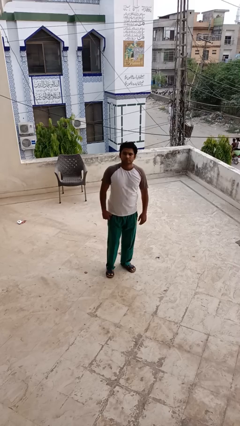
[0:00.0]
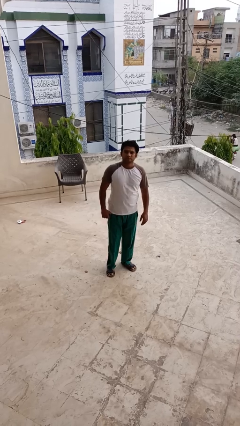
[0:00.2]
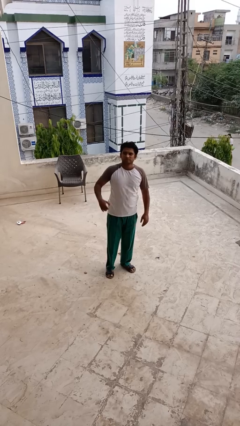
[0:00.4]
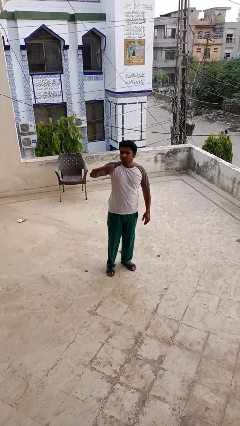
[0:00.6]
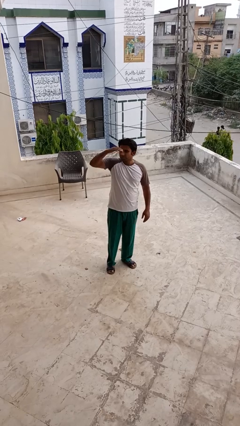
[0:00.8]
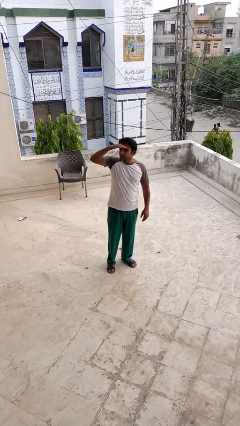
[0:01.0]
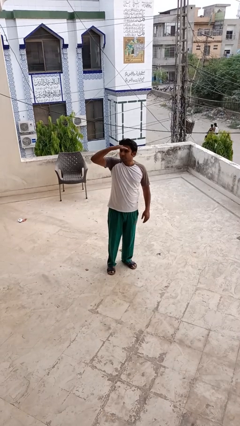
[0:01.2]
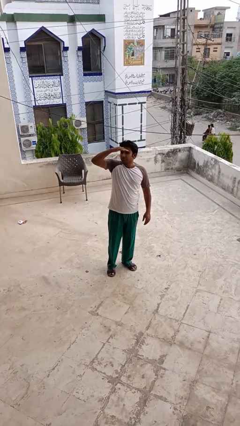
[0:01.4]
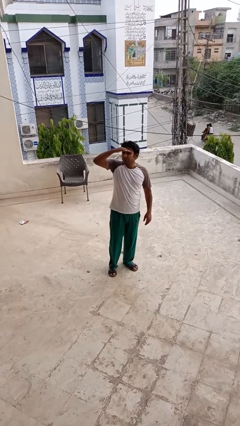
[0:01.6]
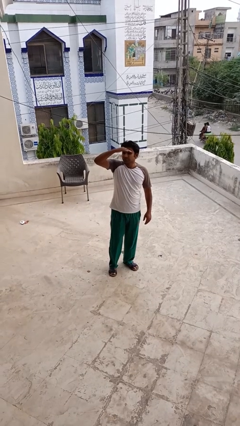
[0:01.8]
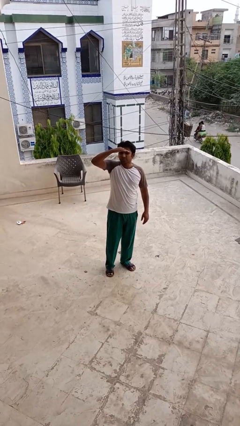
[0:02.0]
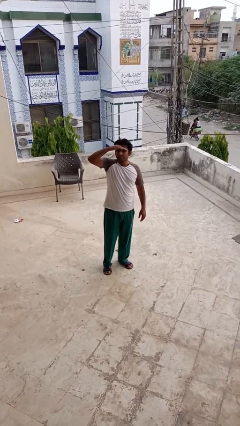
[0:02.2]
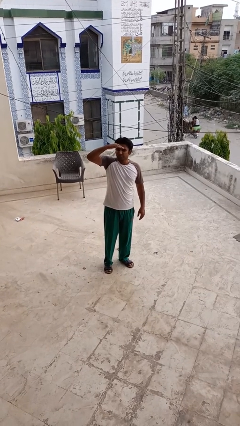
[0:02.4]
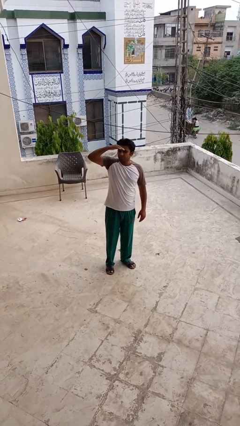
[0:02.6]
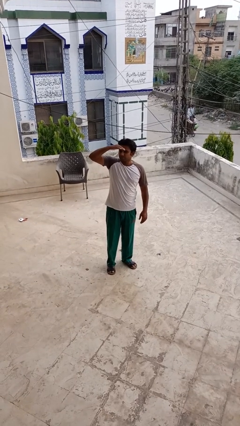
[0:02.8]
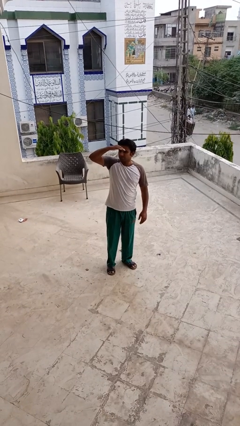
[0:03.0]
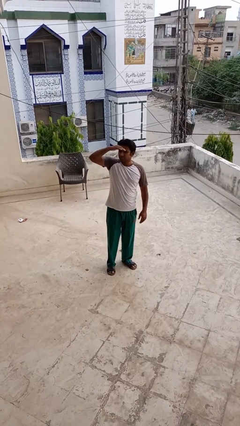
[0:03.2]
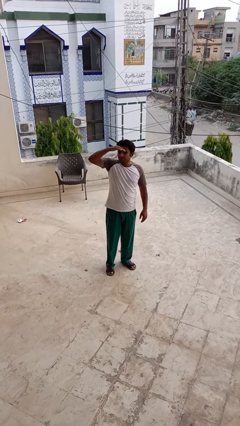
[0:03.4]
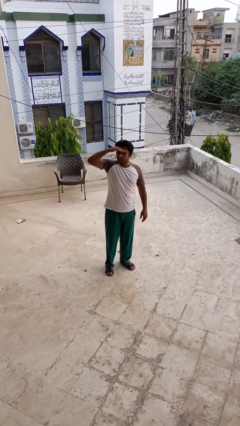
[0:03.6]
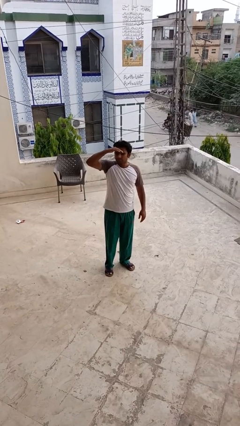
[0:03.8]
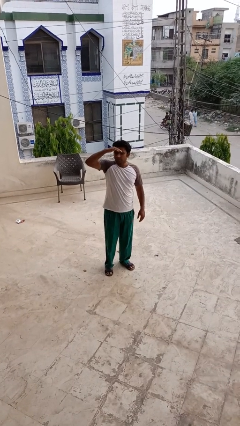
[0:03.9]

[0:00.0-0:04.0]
person shades eyes

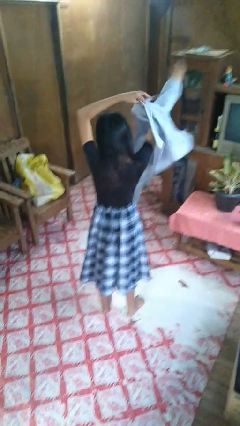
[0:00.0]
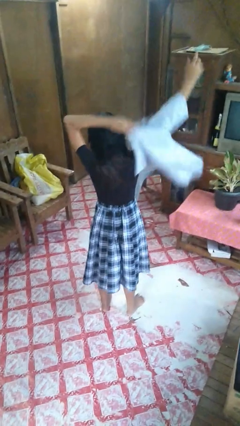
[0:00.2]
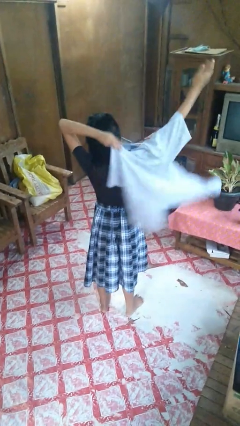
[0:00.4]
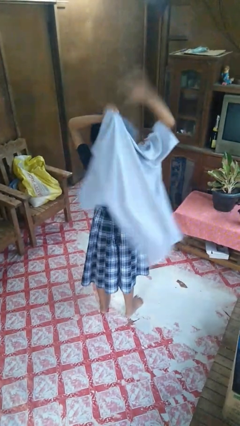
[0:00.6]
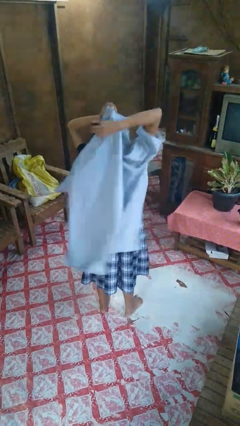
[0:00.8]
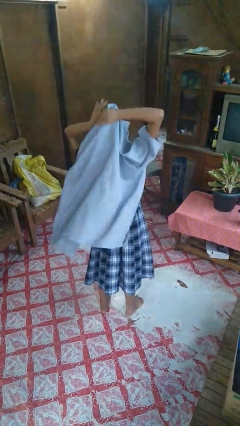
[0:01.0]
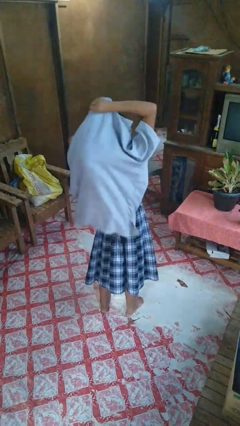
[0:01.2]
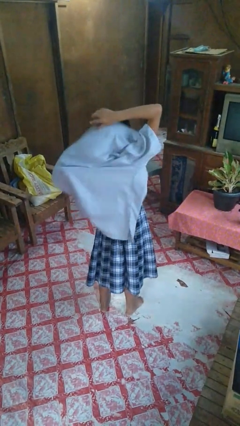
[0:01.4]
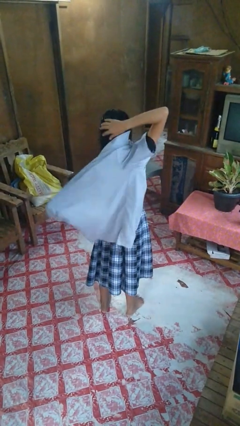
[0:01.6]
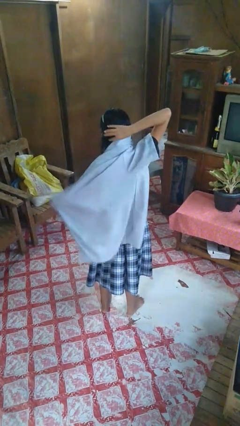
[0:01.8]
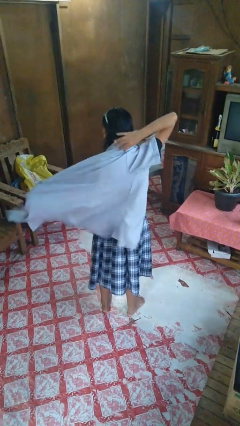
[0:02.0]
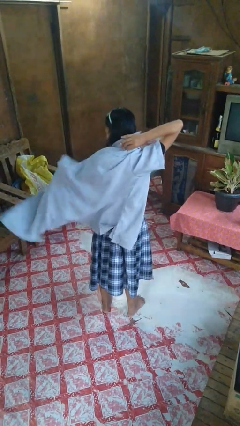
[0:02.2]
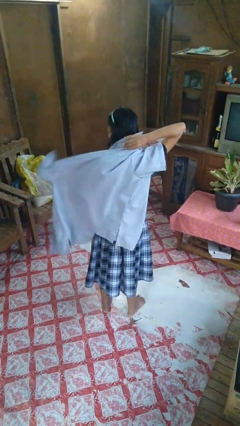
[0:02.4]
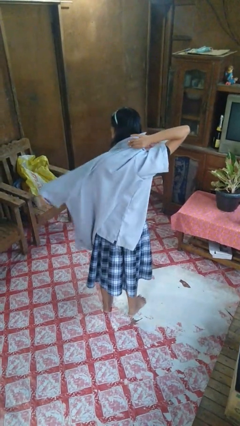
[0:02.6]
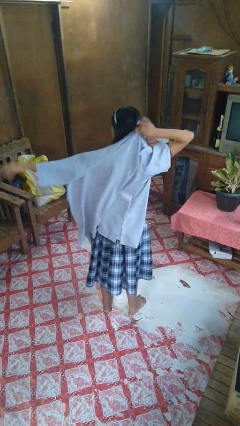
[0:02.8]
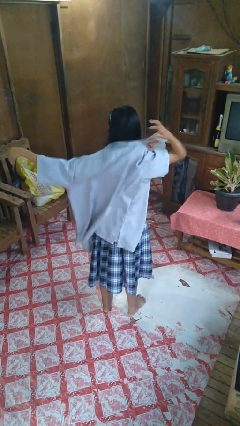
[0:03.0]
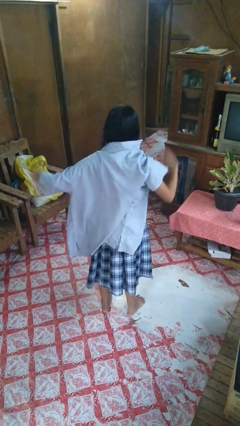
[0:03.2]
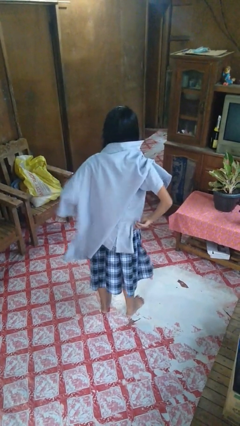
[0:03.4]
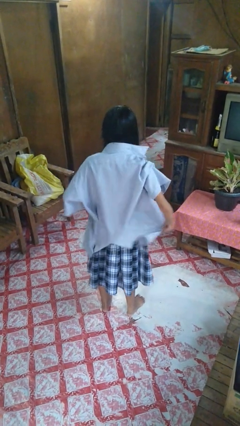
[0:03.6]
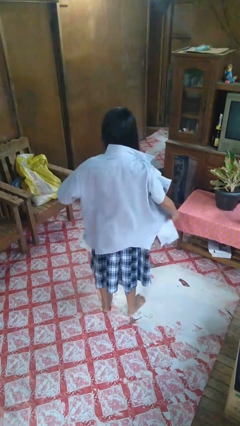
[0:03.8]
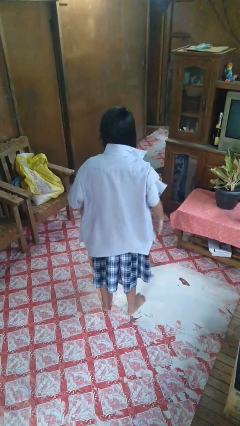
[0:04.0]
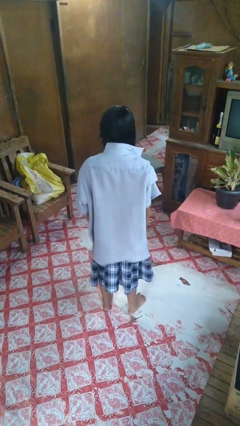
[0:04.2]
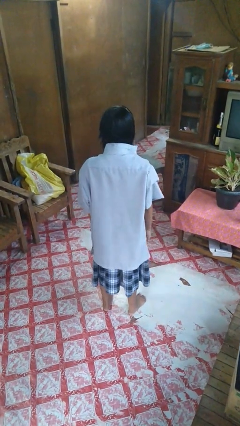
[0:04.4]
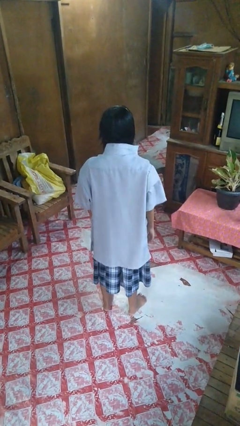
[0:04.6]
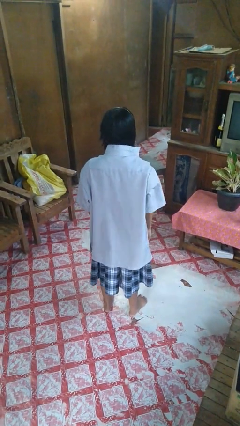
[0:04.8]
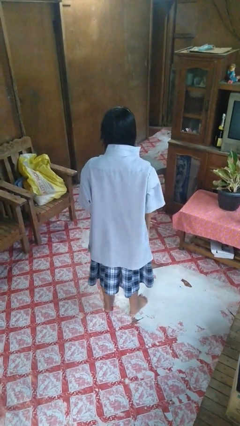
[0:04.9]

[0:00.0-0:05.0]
person puts on shirt

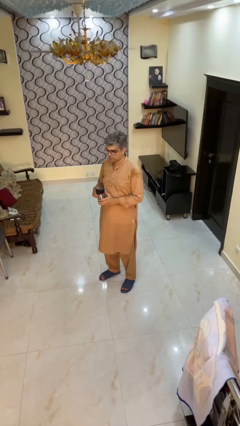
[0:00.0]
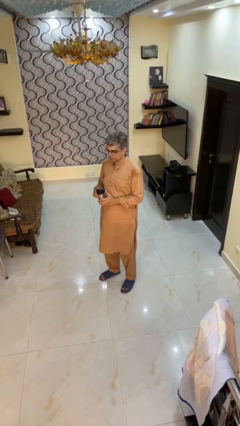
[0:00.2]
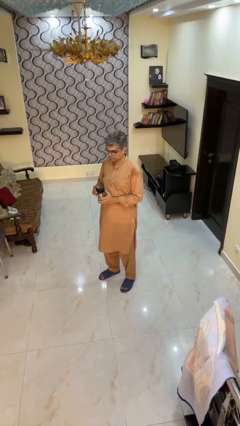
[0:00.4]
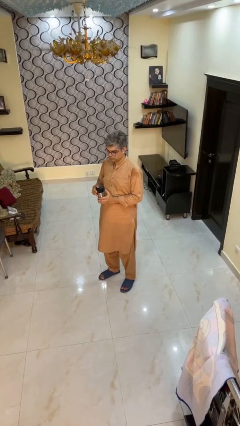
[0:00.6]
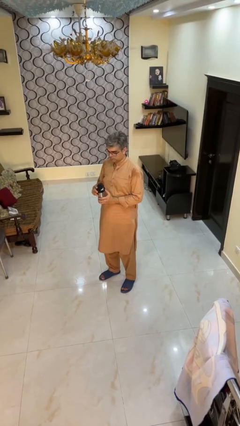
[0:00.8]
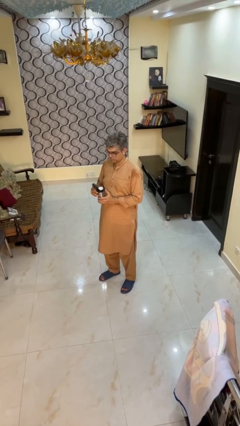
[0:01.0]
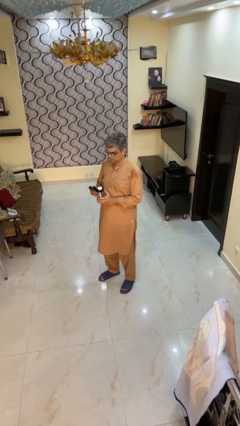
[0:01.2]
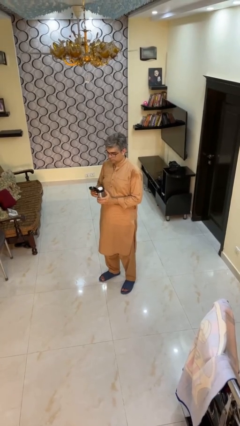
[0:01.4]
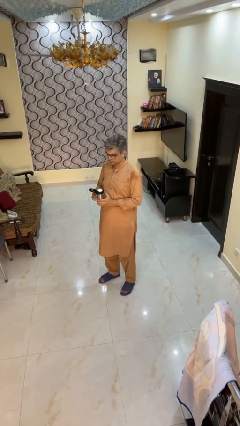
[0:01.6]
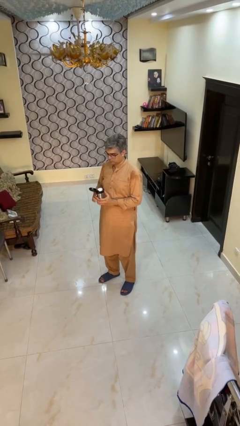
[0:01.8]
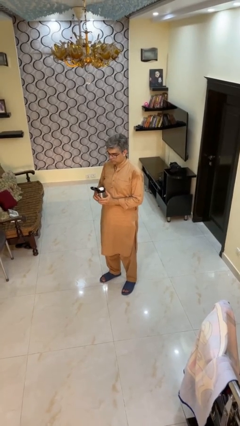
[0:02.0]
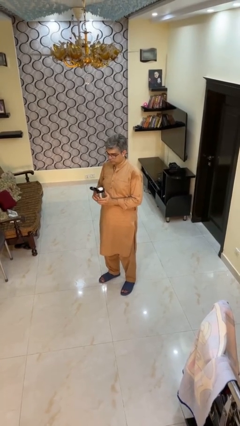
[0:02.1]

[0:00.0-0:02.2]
person opens beverage can

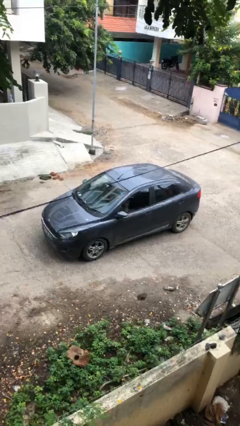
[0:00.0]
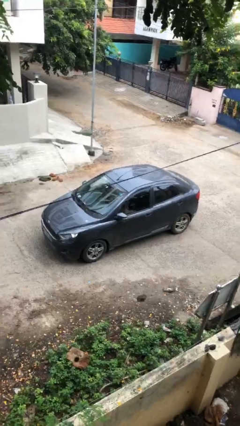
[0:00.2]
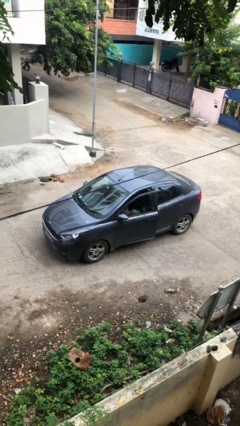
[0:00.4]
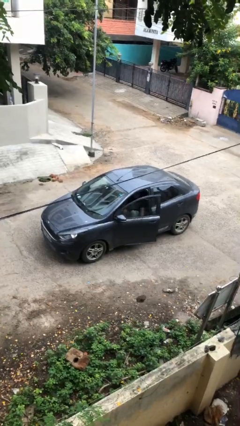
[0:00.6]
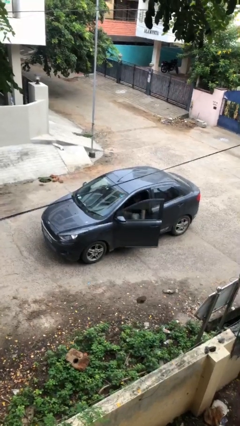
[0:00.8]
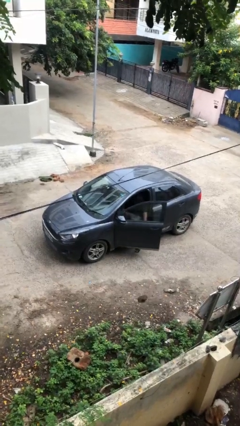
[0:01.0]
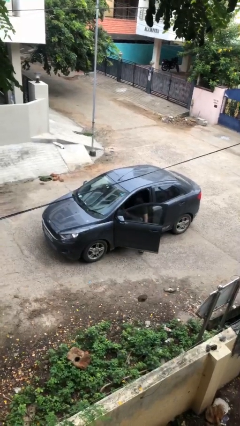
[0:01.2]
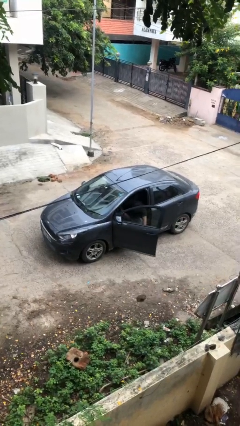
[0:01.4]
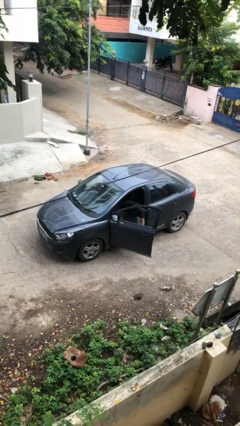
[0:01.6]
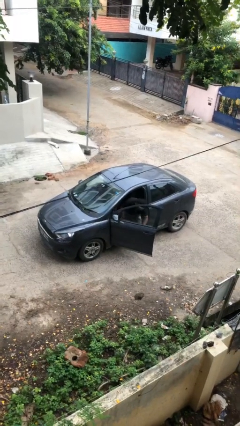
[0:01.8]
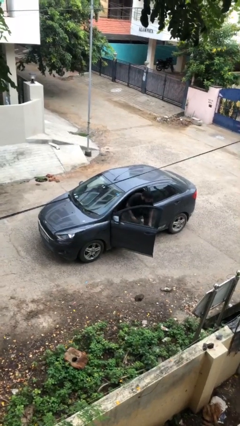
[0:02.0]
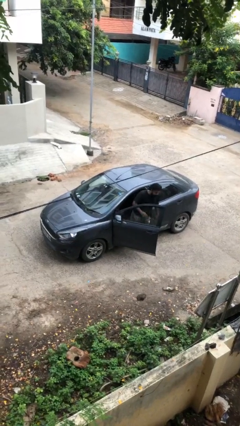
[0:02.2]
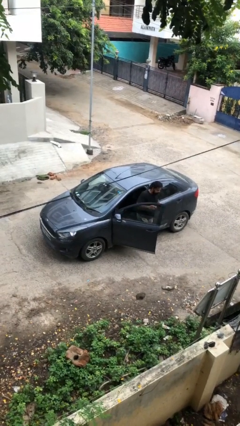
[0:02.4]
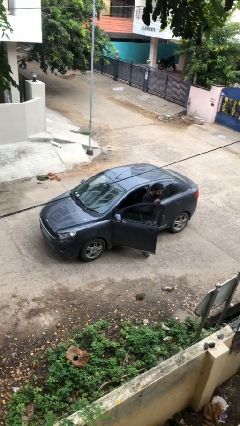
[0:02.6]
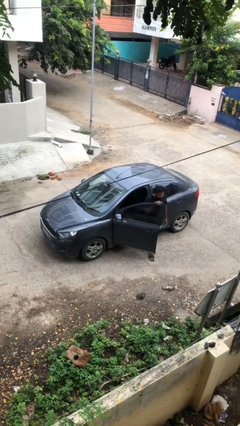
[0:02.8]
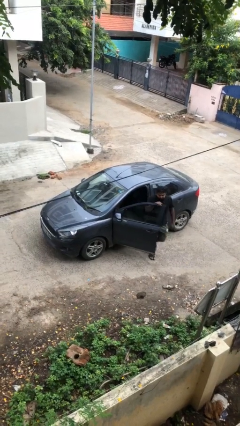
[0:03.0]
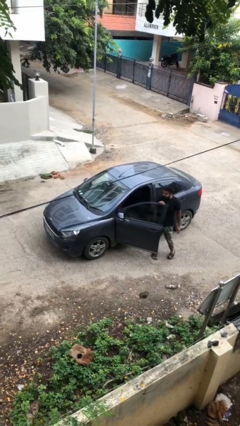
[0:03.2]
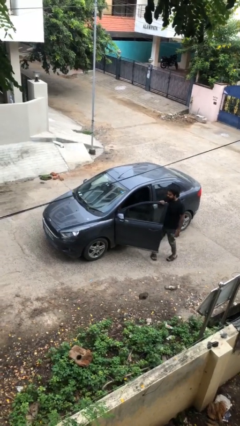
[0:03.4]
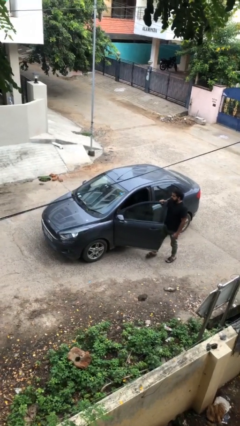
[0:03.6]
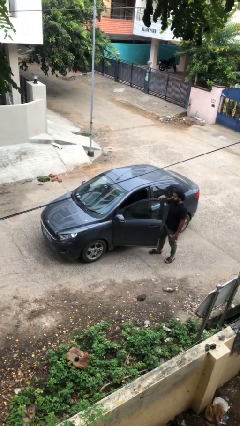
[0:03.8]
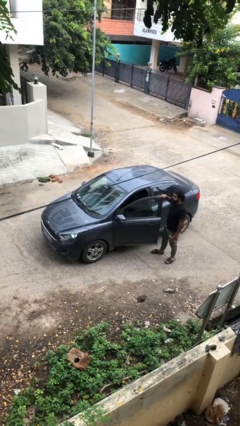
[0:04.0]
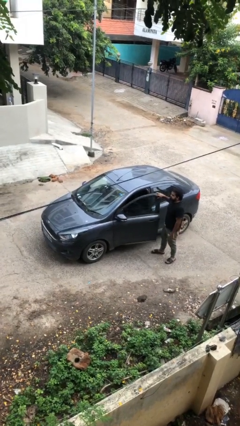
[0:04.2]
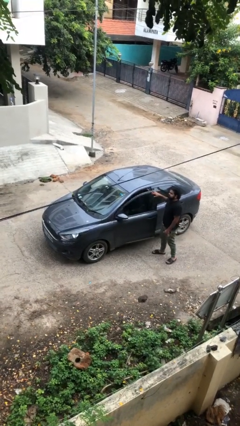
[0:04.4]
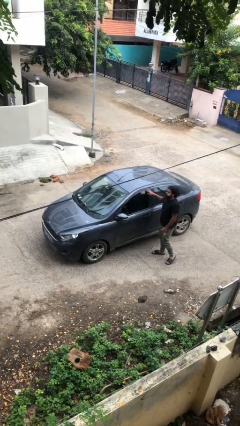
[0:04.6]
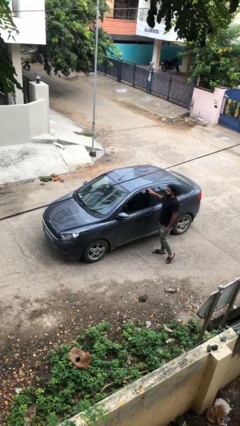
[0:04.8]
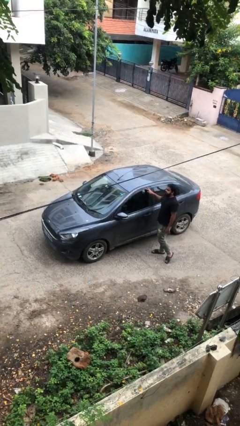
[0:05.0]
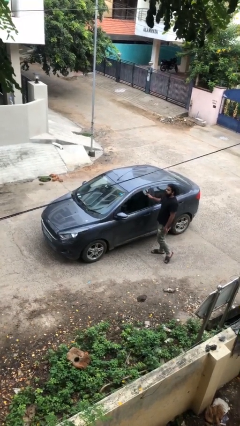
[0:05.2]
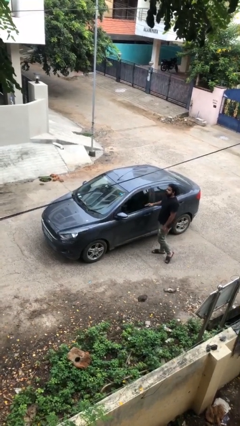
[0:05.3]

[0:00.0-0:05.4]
car drops off person

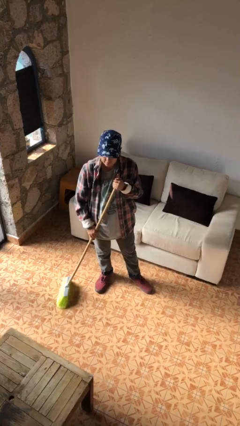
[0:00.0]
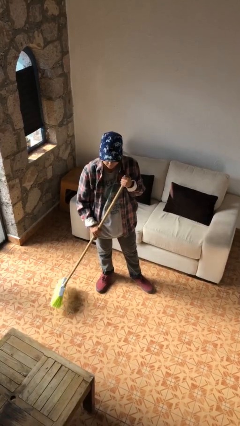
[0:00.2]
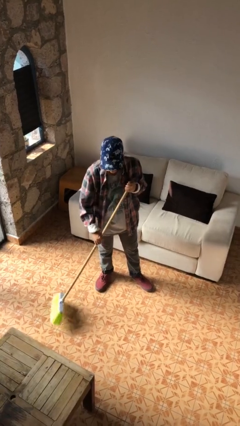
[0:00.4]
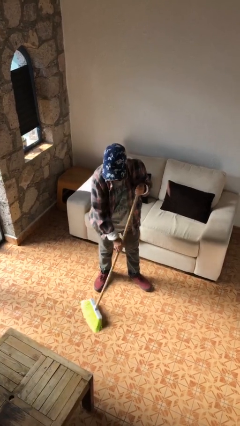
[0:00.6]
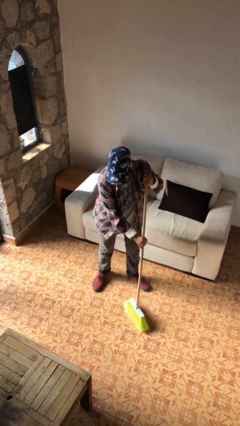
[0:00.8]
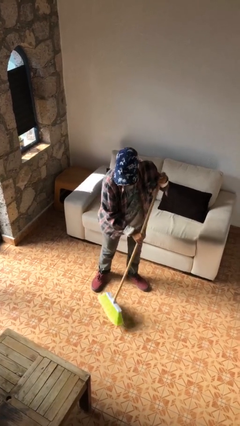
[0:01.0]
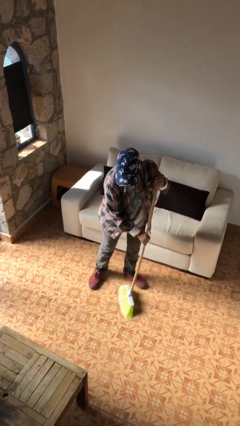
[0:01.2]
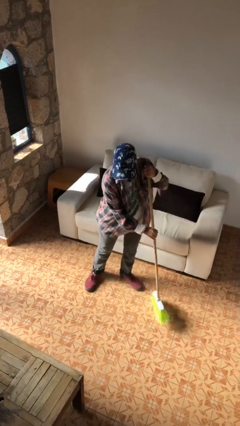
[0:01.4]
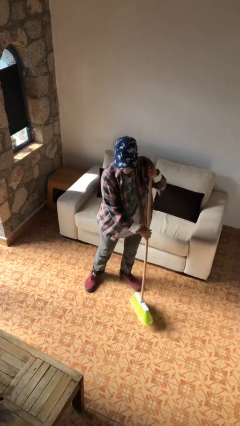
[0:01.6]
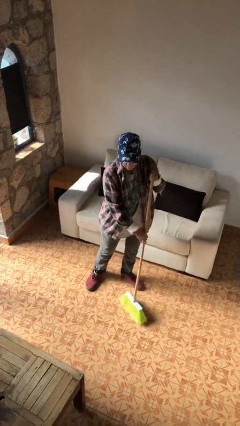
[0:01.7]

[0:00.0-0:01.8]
person sweeps floor
